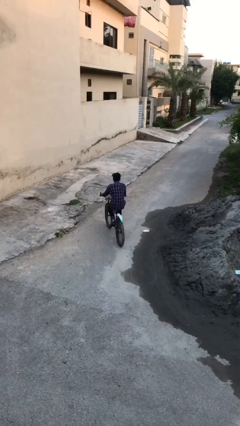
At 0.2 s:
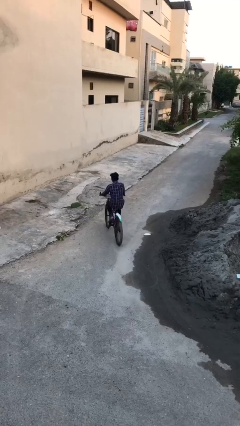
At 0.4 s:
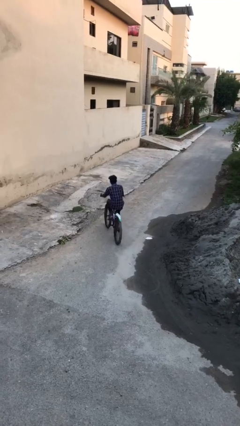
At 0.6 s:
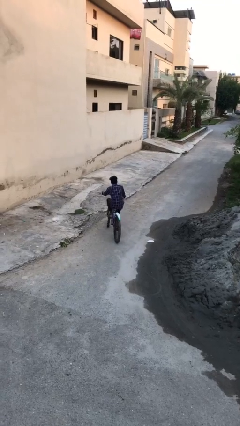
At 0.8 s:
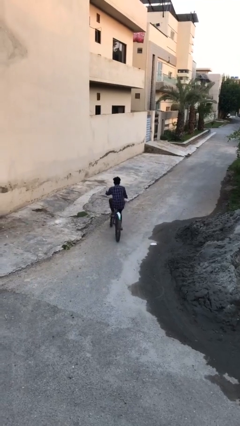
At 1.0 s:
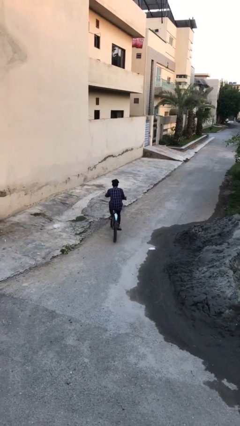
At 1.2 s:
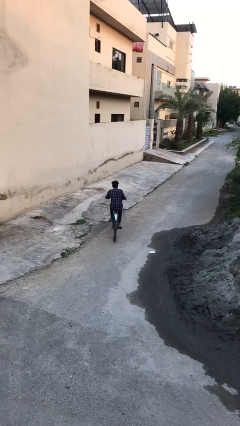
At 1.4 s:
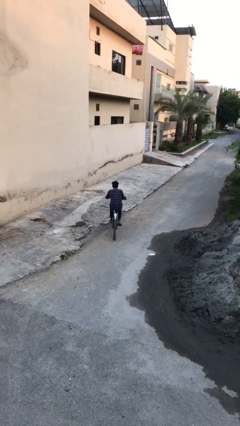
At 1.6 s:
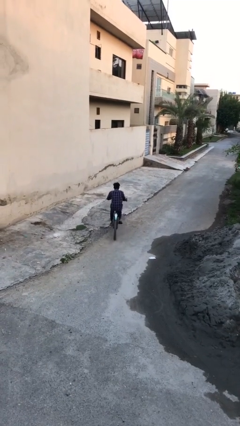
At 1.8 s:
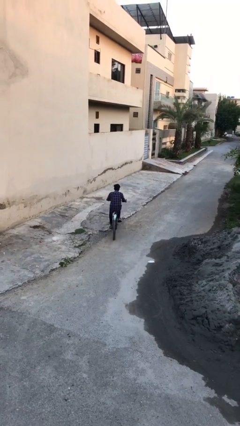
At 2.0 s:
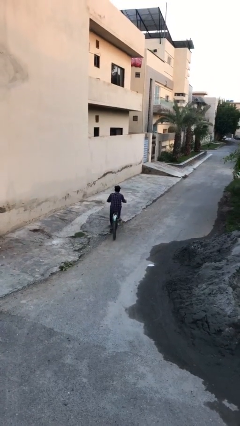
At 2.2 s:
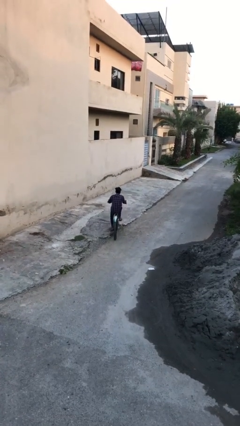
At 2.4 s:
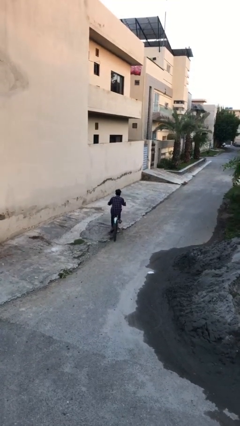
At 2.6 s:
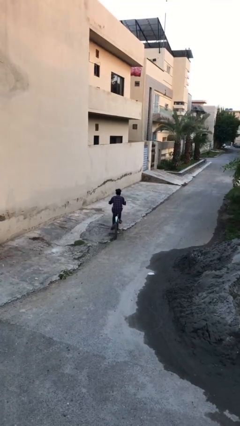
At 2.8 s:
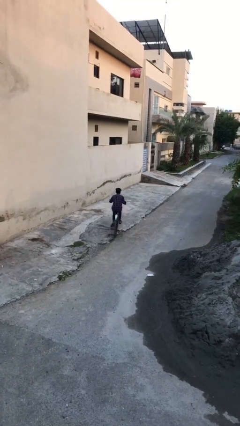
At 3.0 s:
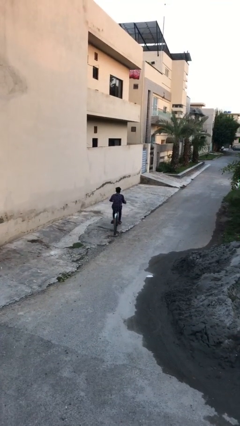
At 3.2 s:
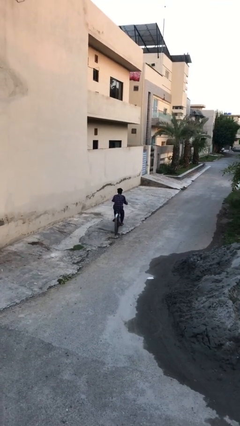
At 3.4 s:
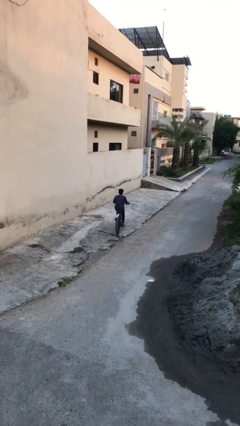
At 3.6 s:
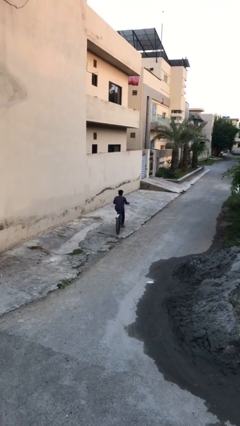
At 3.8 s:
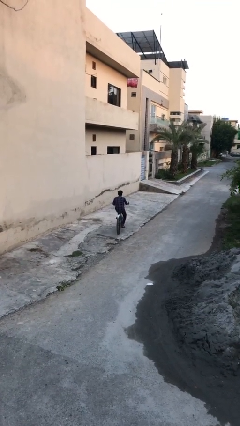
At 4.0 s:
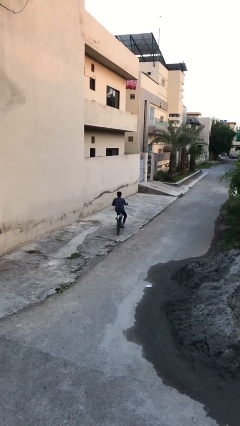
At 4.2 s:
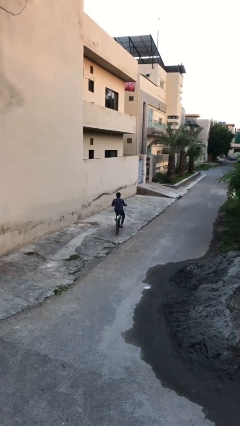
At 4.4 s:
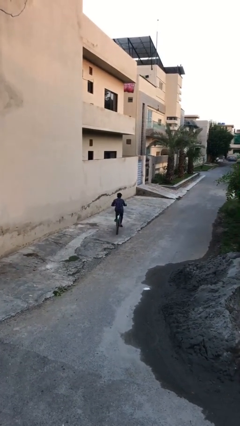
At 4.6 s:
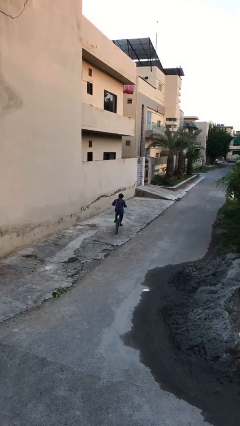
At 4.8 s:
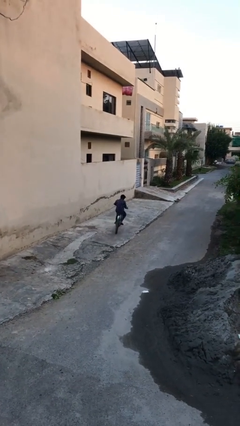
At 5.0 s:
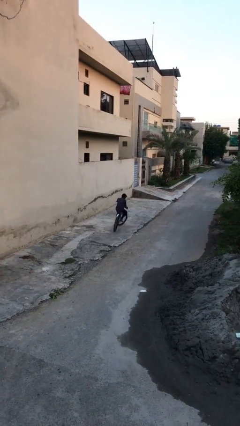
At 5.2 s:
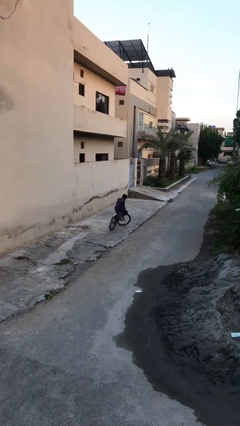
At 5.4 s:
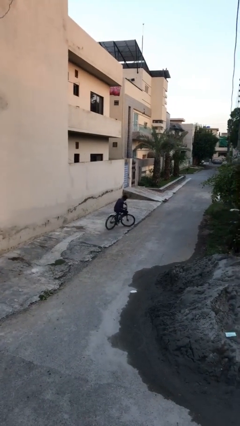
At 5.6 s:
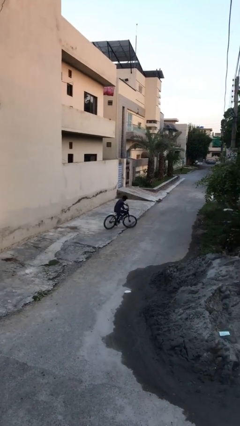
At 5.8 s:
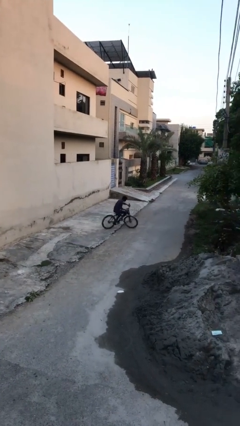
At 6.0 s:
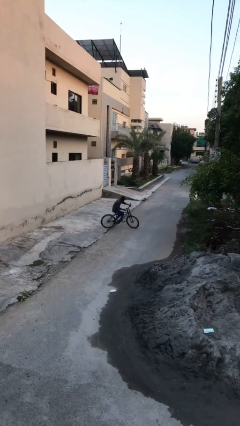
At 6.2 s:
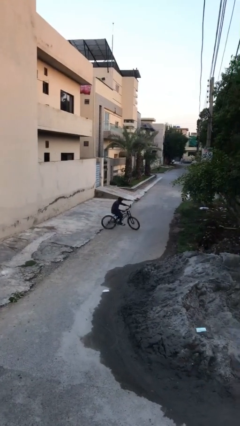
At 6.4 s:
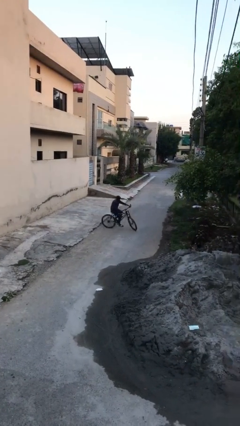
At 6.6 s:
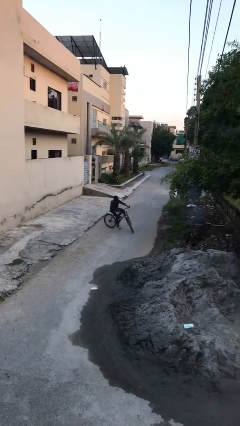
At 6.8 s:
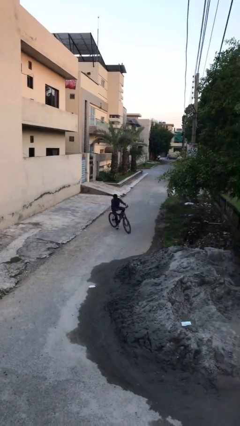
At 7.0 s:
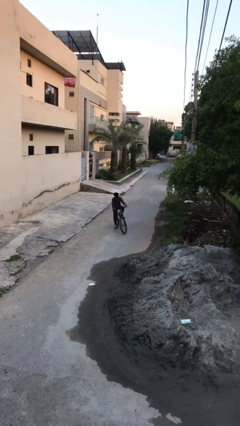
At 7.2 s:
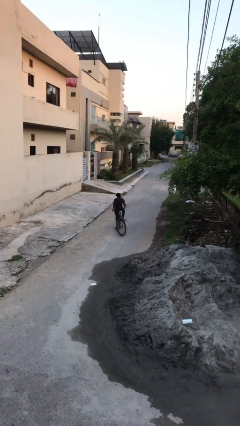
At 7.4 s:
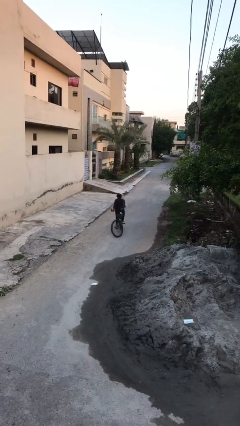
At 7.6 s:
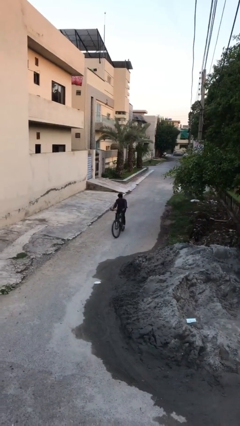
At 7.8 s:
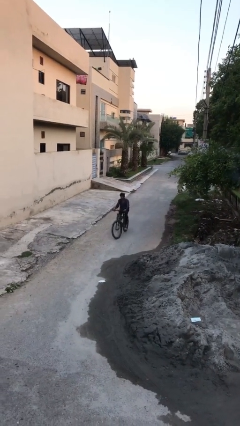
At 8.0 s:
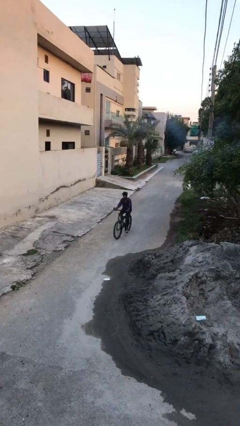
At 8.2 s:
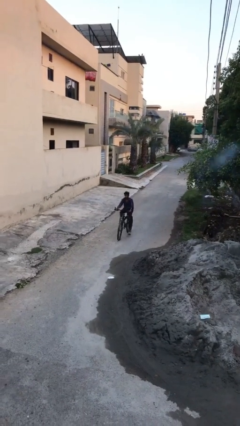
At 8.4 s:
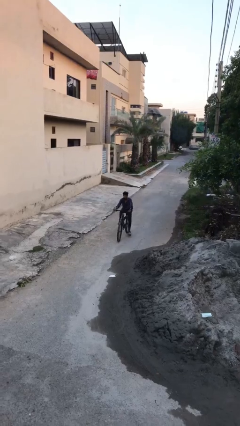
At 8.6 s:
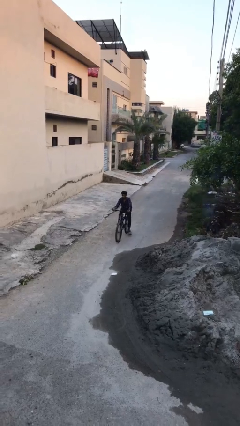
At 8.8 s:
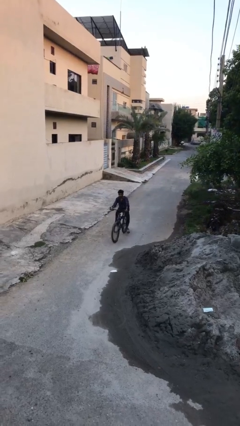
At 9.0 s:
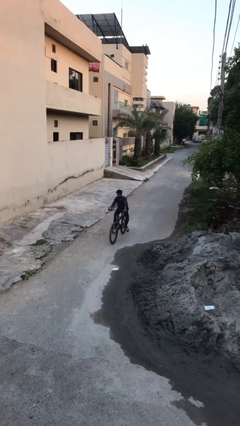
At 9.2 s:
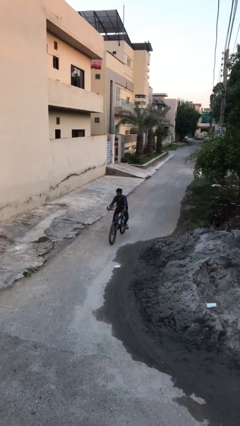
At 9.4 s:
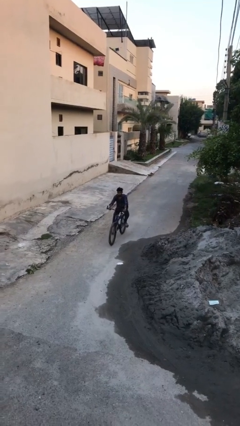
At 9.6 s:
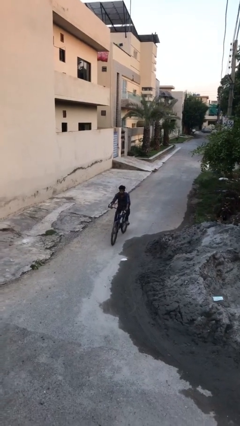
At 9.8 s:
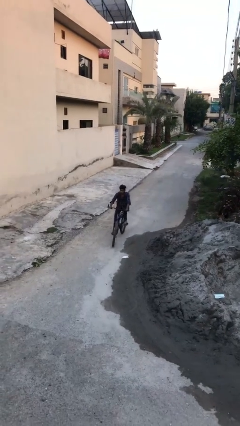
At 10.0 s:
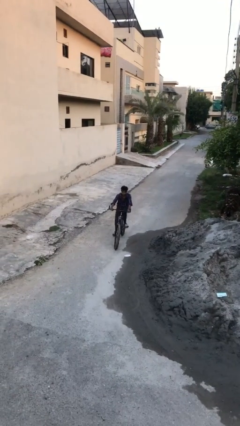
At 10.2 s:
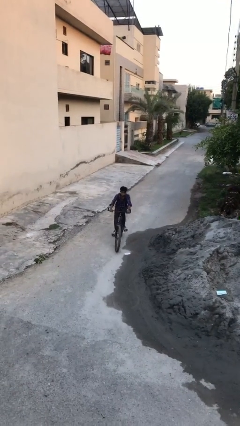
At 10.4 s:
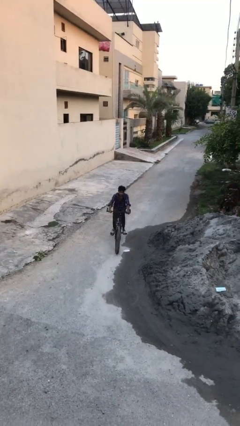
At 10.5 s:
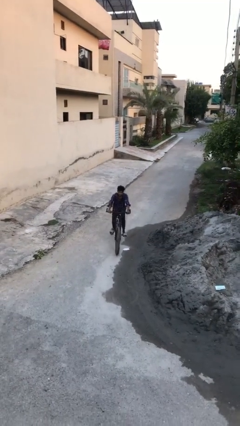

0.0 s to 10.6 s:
person rides bicycle

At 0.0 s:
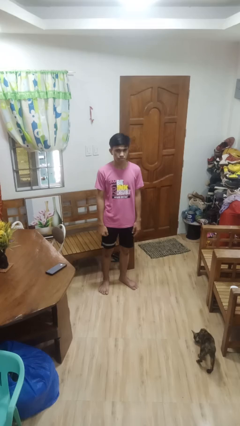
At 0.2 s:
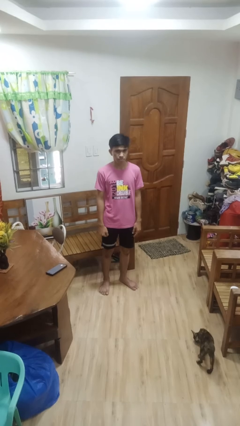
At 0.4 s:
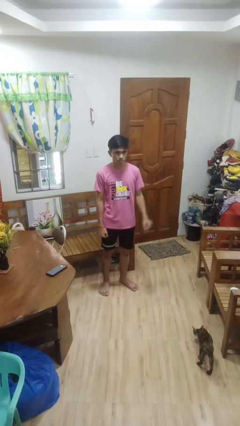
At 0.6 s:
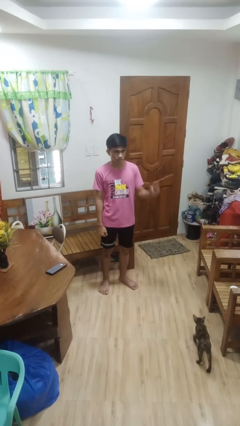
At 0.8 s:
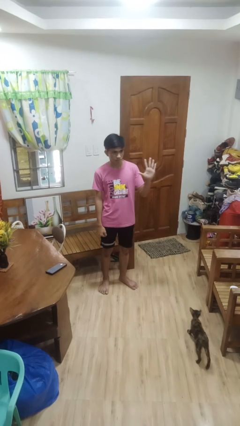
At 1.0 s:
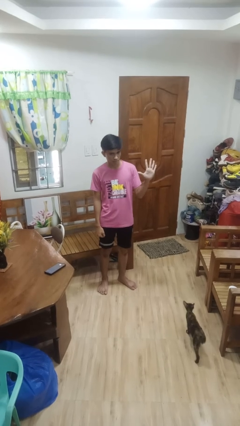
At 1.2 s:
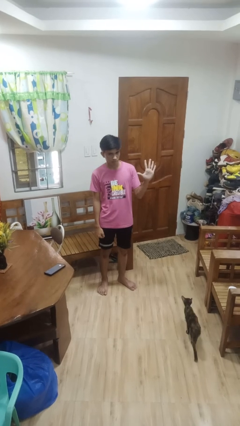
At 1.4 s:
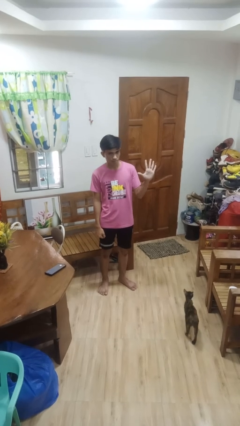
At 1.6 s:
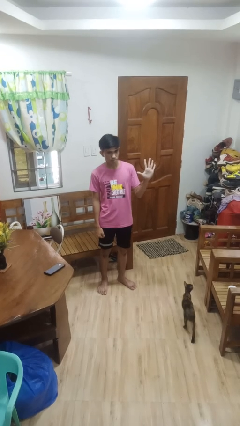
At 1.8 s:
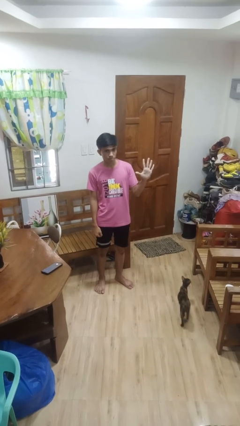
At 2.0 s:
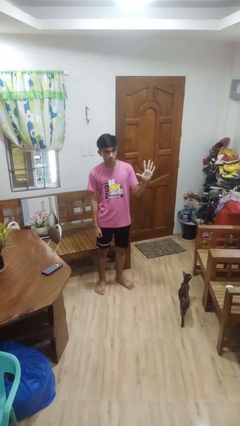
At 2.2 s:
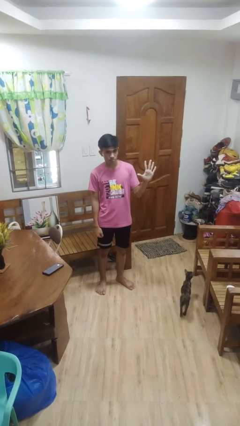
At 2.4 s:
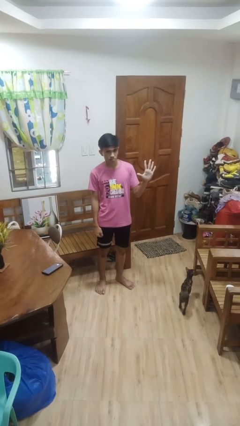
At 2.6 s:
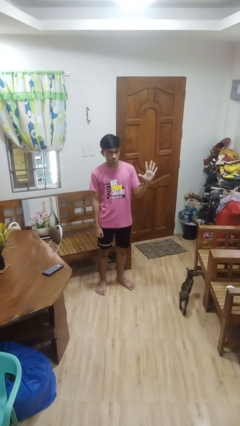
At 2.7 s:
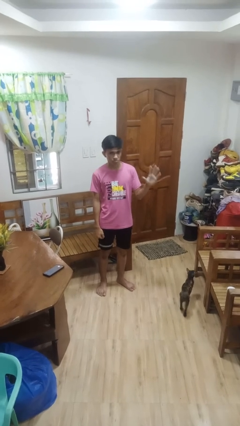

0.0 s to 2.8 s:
person gestures number five

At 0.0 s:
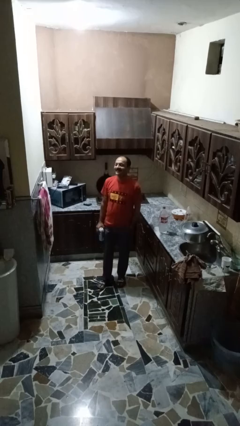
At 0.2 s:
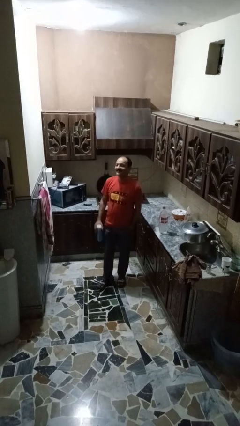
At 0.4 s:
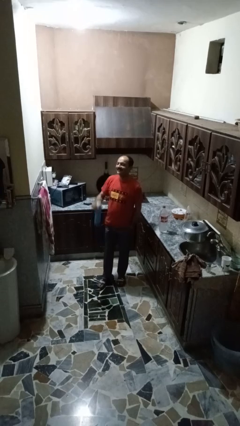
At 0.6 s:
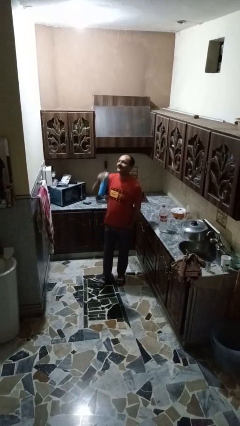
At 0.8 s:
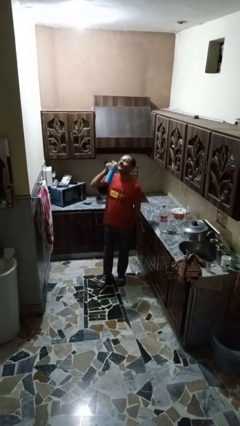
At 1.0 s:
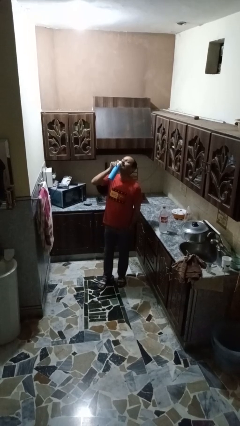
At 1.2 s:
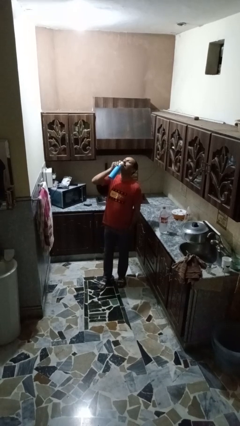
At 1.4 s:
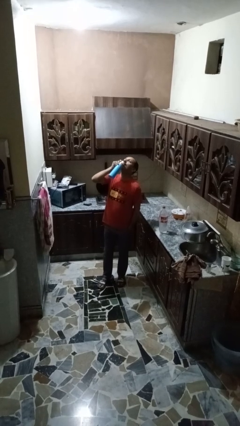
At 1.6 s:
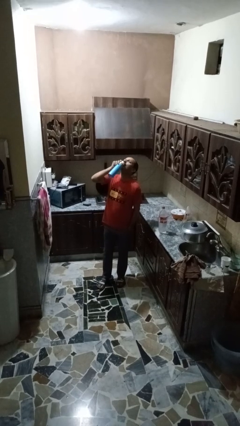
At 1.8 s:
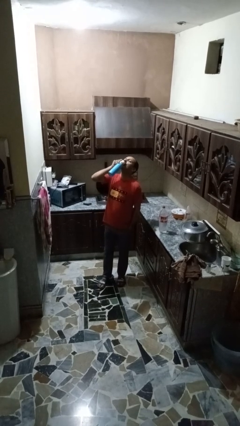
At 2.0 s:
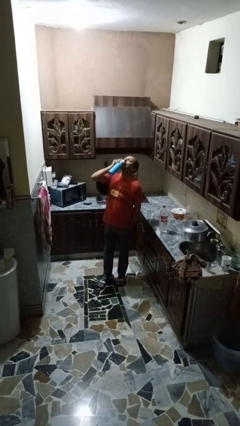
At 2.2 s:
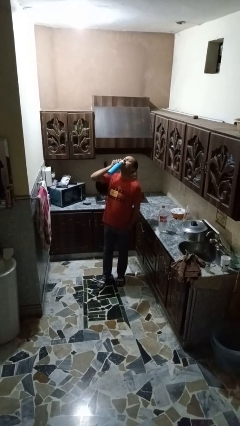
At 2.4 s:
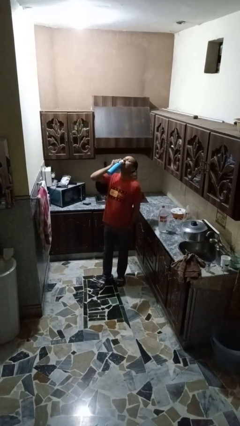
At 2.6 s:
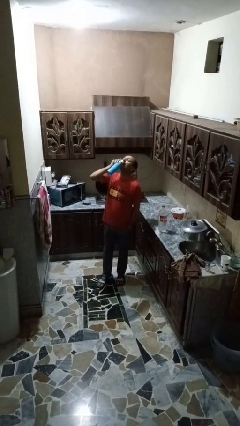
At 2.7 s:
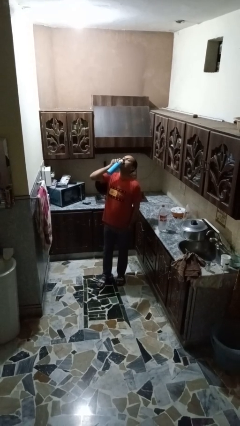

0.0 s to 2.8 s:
person drinks from bottle

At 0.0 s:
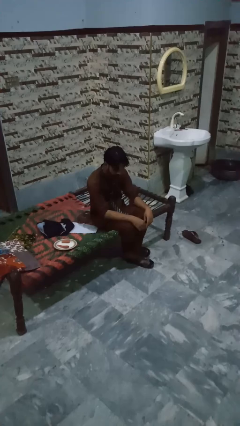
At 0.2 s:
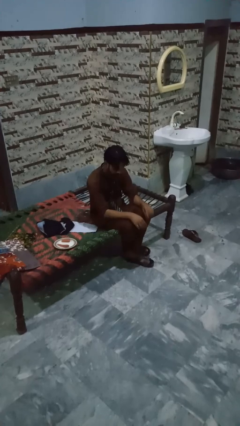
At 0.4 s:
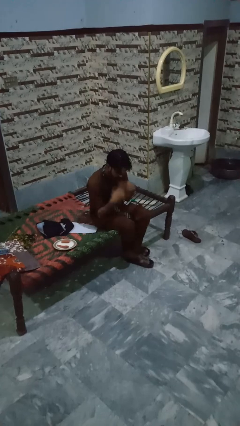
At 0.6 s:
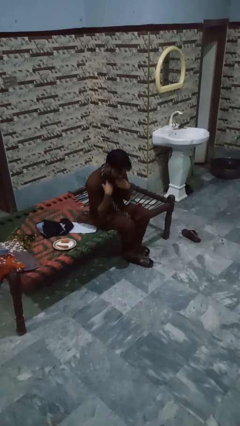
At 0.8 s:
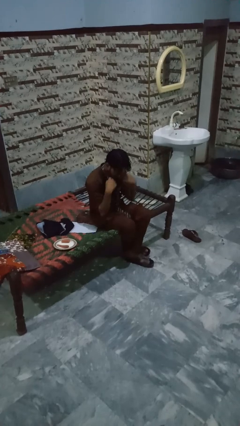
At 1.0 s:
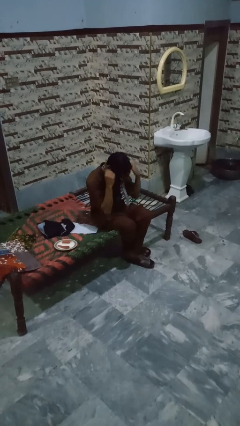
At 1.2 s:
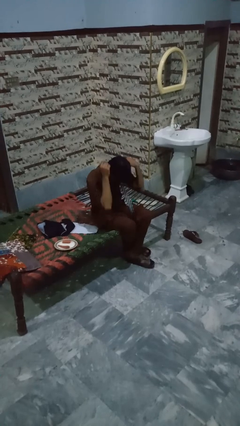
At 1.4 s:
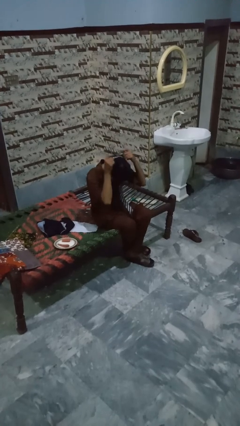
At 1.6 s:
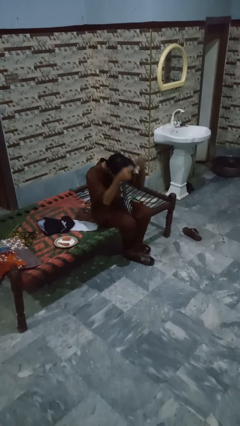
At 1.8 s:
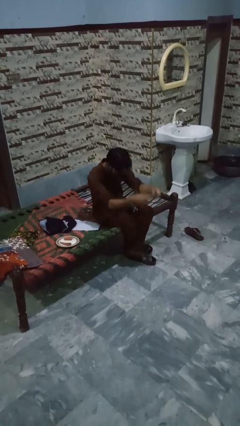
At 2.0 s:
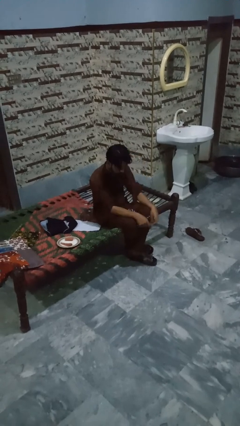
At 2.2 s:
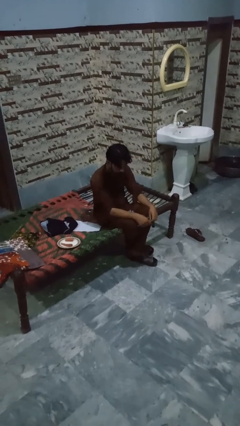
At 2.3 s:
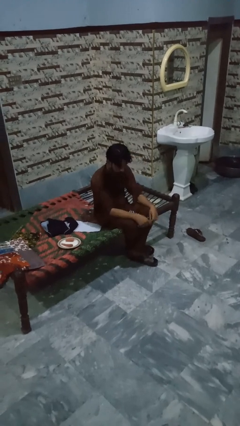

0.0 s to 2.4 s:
person takes off necktie
